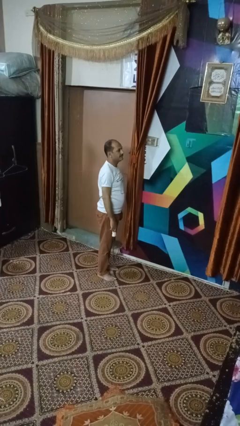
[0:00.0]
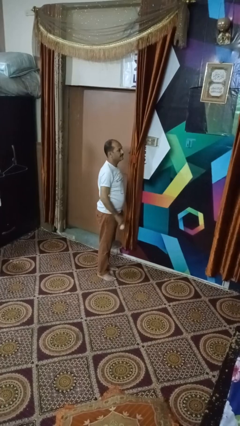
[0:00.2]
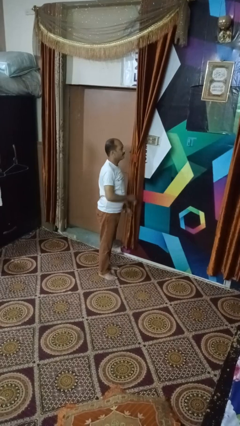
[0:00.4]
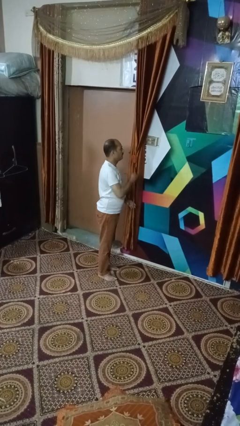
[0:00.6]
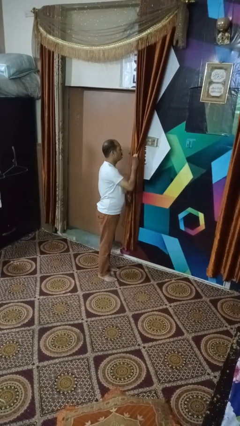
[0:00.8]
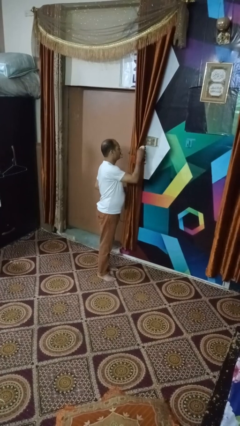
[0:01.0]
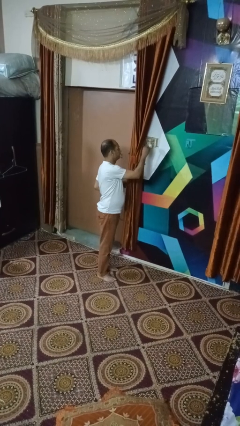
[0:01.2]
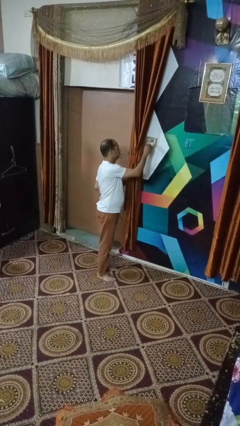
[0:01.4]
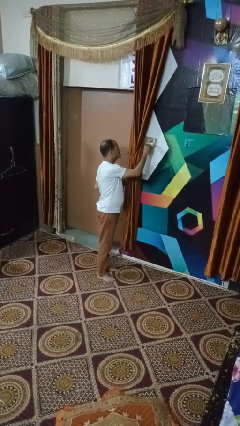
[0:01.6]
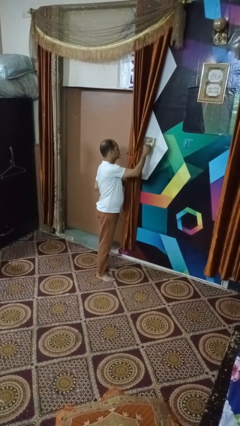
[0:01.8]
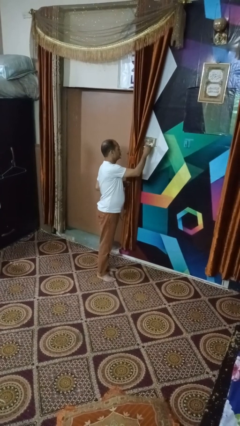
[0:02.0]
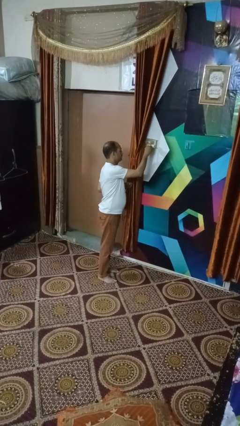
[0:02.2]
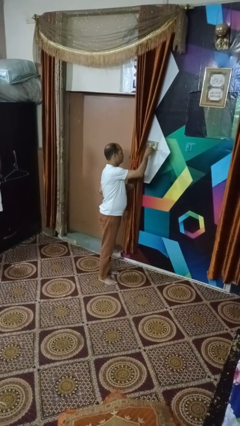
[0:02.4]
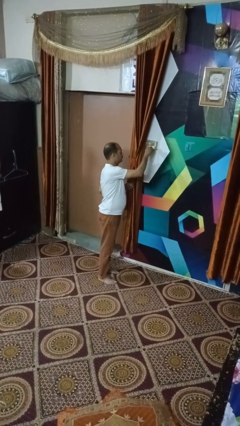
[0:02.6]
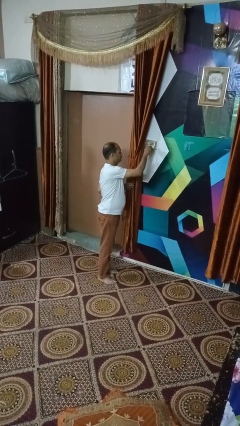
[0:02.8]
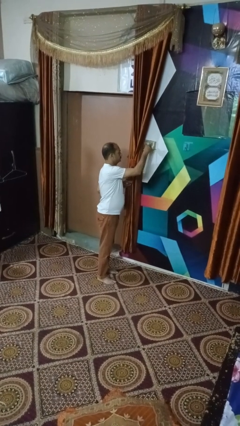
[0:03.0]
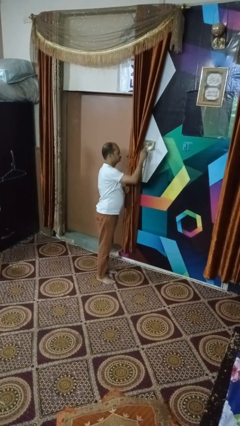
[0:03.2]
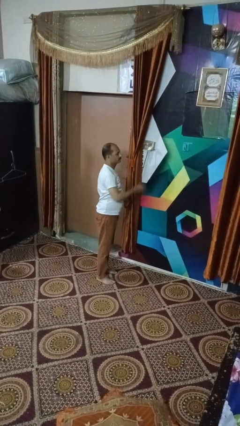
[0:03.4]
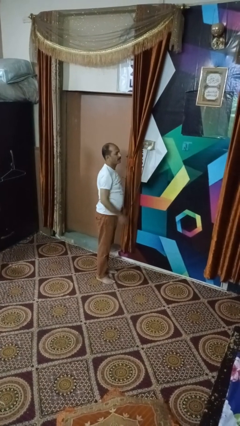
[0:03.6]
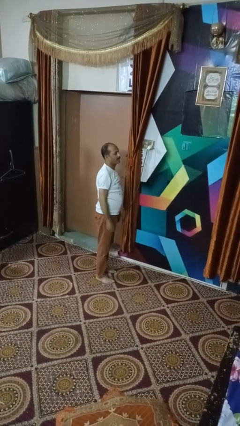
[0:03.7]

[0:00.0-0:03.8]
person plugs into electrical socket

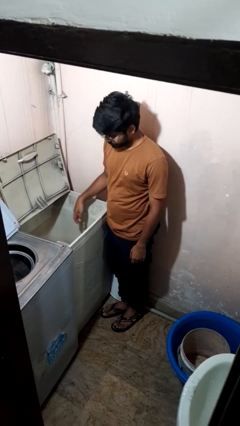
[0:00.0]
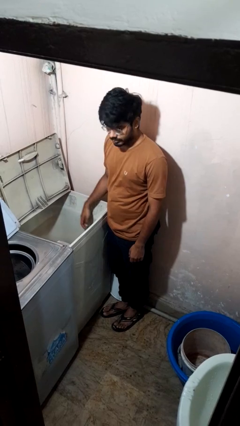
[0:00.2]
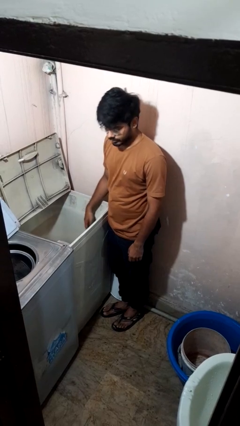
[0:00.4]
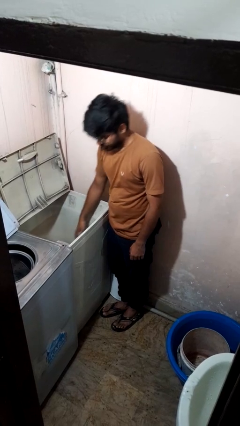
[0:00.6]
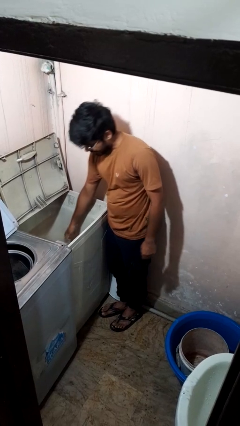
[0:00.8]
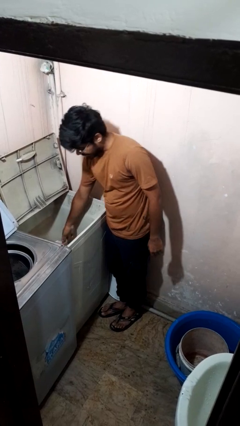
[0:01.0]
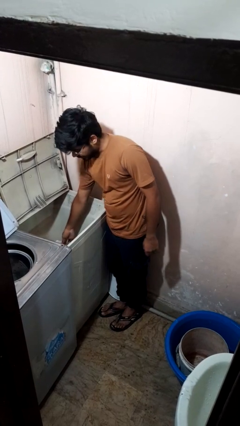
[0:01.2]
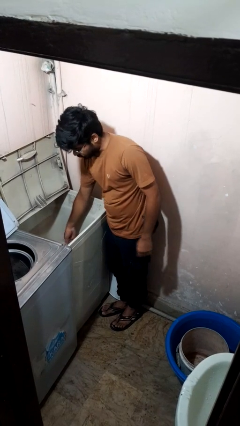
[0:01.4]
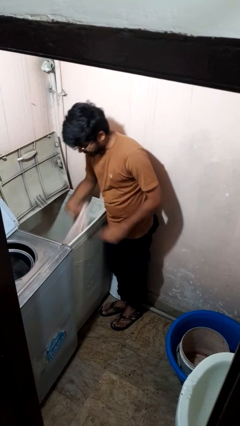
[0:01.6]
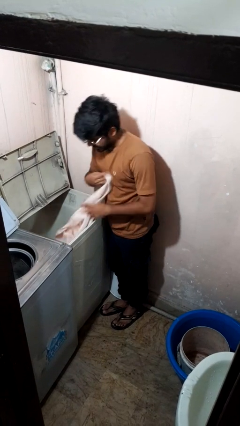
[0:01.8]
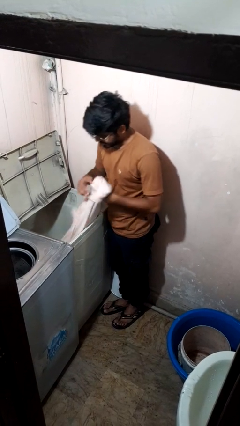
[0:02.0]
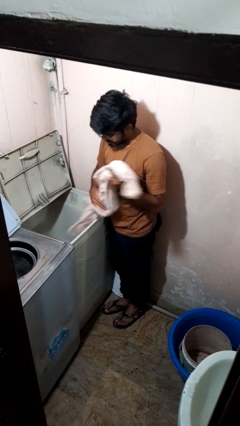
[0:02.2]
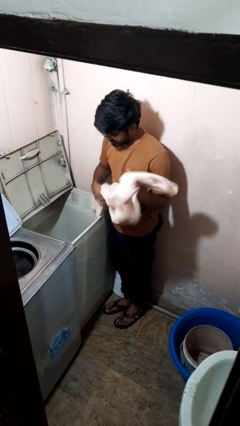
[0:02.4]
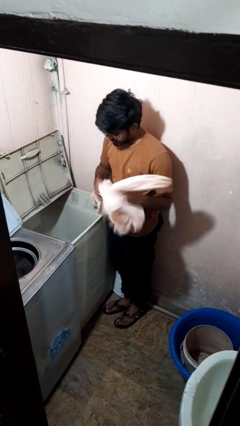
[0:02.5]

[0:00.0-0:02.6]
person unloads clotheswasher

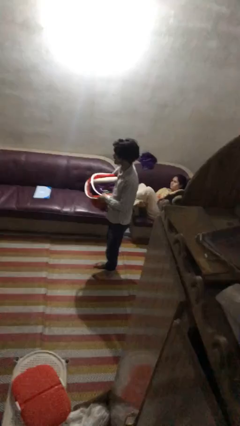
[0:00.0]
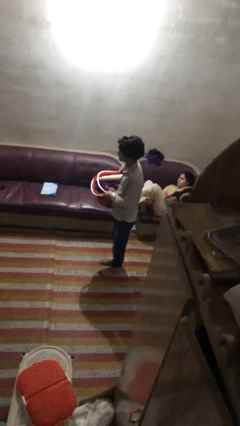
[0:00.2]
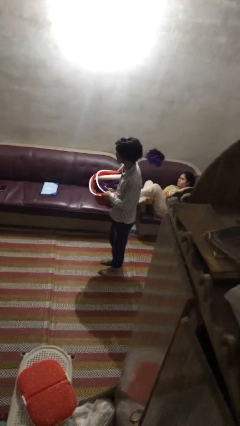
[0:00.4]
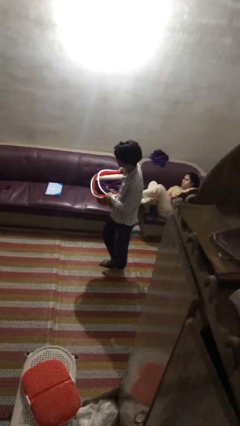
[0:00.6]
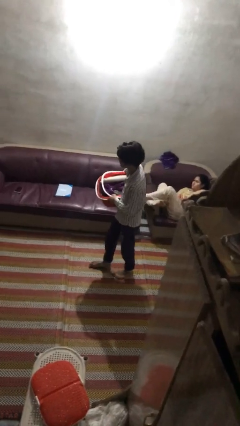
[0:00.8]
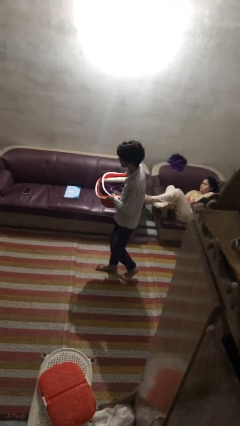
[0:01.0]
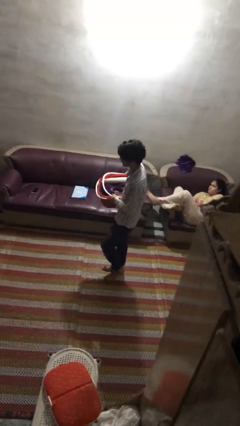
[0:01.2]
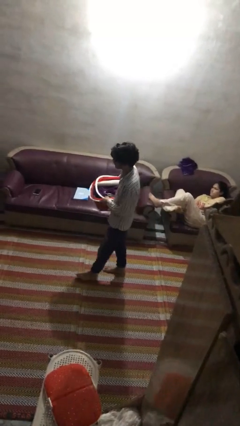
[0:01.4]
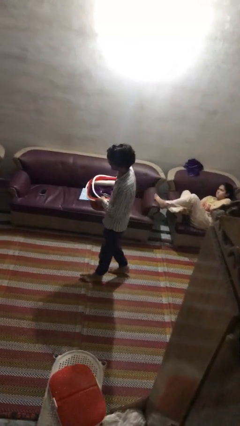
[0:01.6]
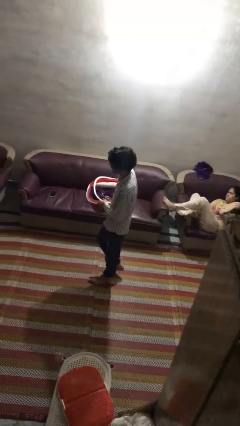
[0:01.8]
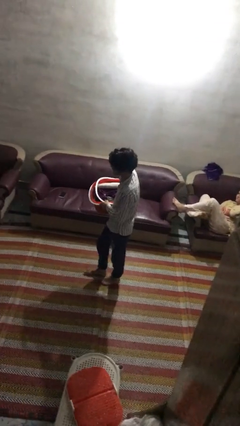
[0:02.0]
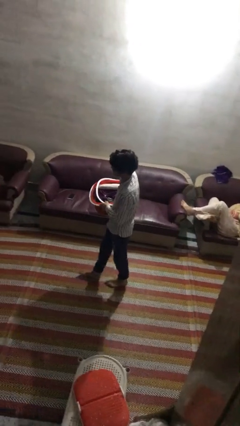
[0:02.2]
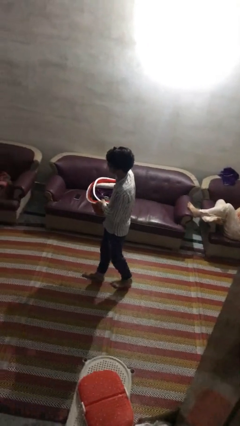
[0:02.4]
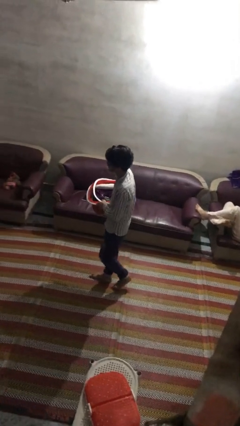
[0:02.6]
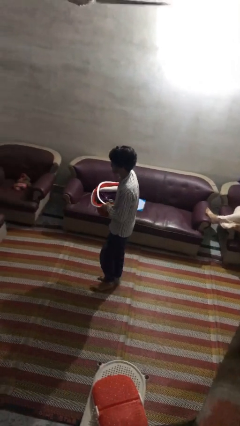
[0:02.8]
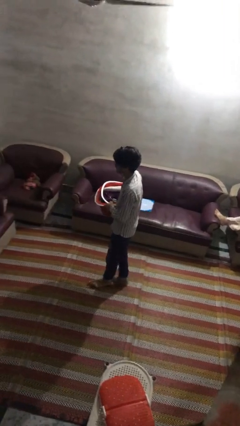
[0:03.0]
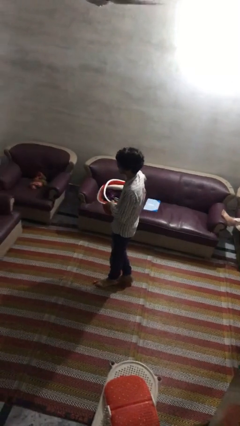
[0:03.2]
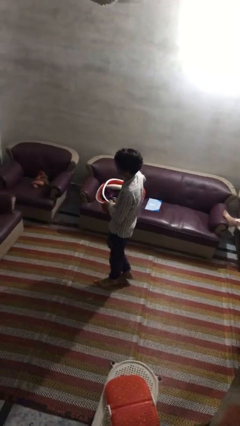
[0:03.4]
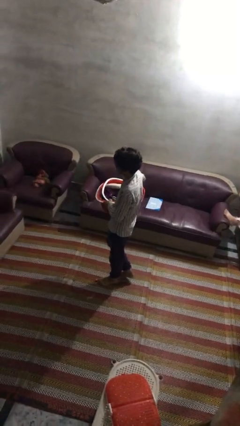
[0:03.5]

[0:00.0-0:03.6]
person carries laundry basket

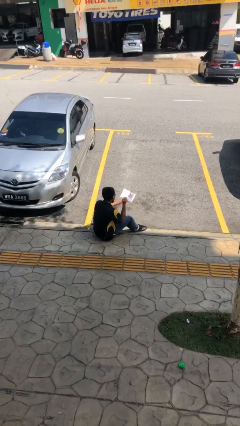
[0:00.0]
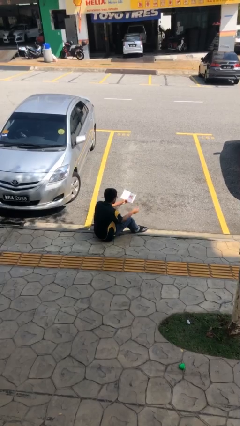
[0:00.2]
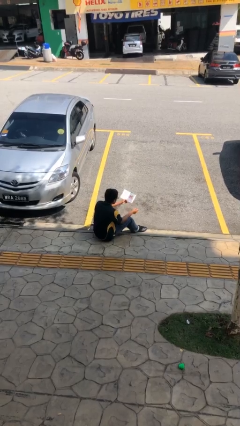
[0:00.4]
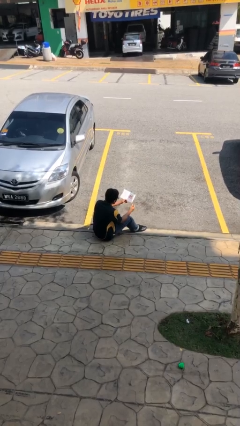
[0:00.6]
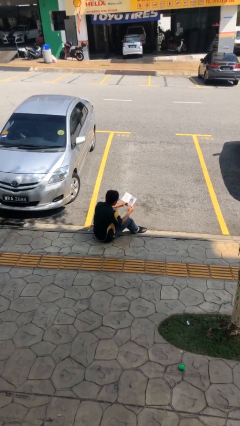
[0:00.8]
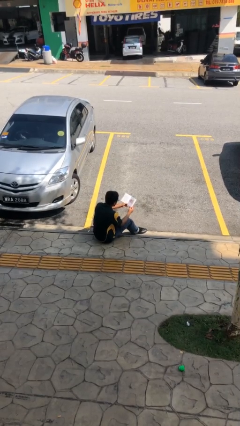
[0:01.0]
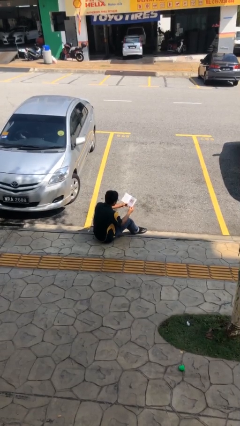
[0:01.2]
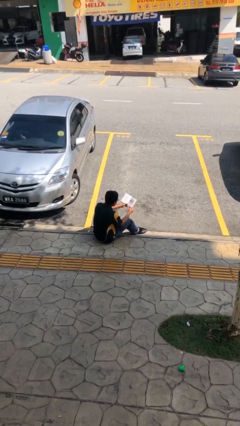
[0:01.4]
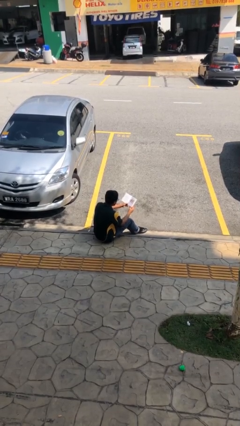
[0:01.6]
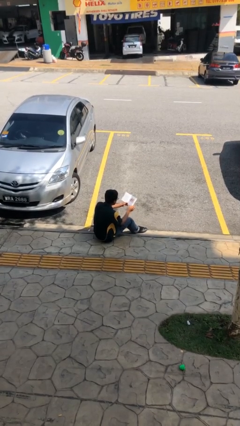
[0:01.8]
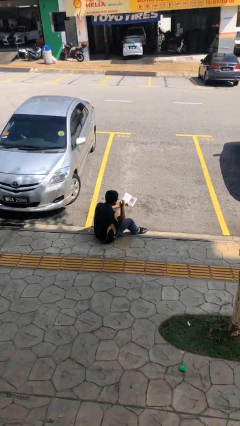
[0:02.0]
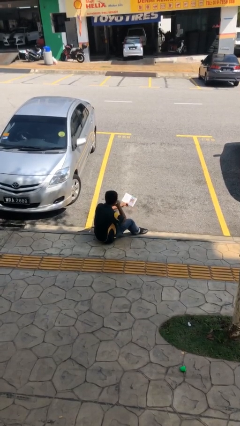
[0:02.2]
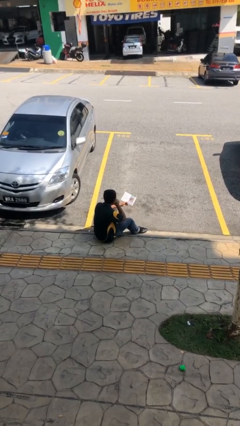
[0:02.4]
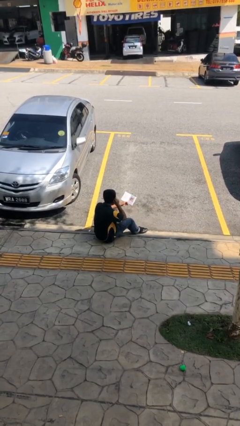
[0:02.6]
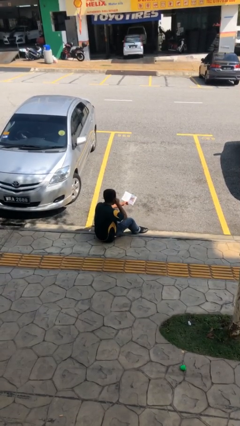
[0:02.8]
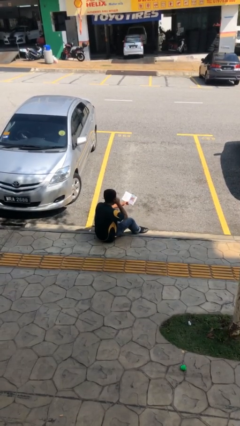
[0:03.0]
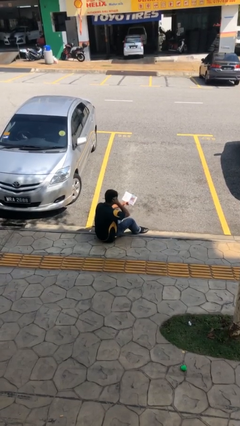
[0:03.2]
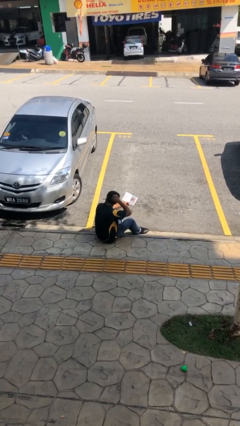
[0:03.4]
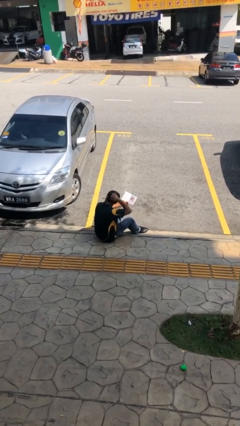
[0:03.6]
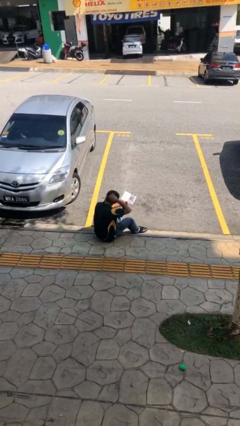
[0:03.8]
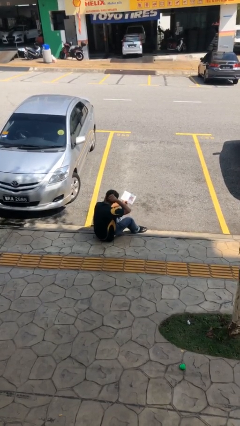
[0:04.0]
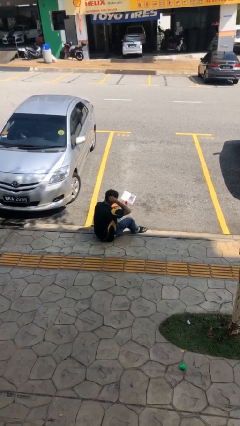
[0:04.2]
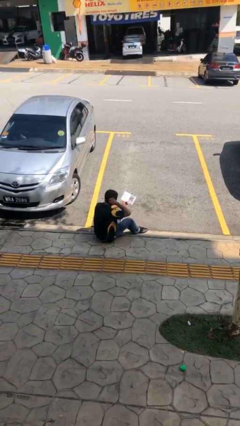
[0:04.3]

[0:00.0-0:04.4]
person reads document

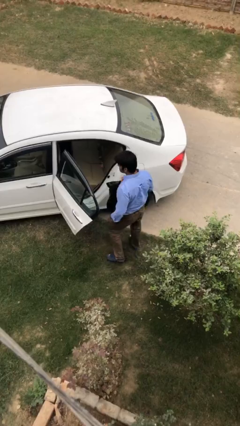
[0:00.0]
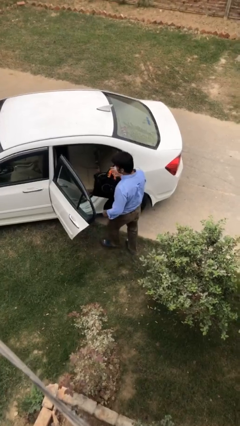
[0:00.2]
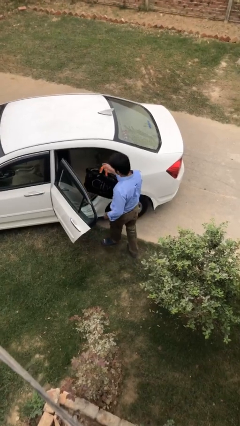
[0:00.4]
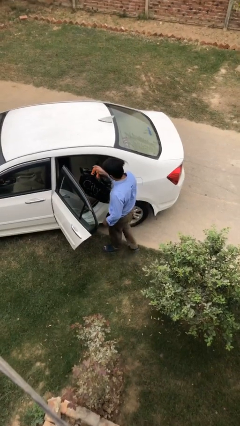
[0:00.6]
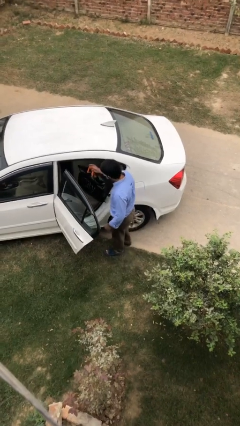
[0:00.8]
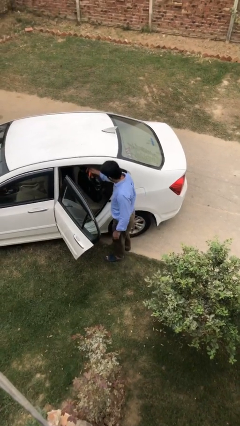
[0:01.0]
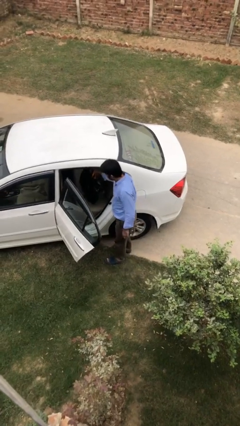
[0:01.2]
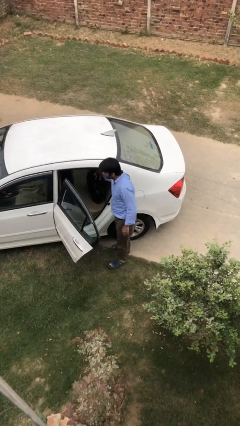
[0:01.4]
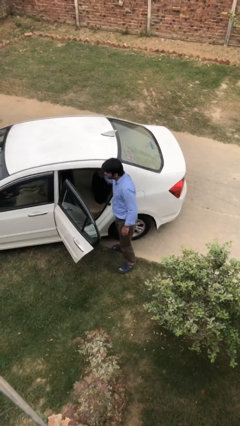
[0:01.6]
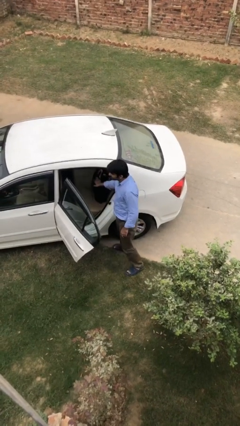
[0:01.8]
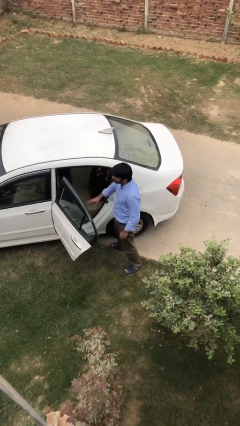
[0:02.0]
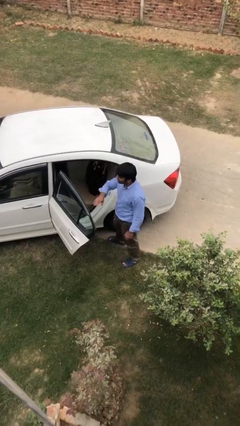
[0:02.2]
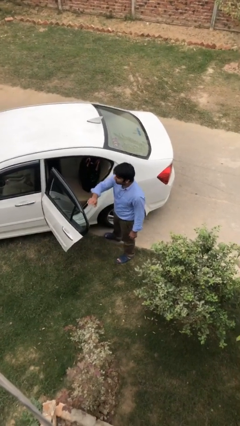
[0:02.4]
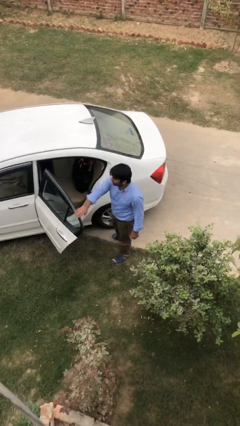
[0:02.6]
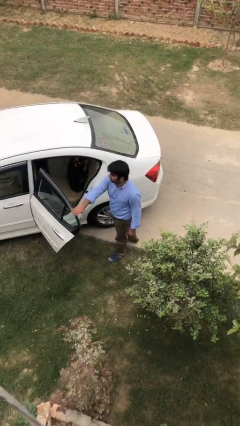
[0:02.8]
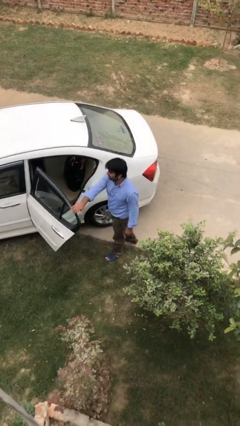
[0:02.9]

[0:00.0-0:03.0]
person loads car

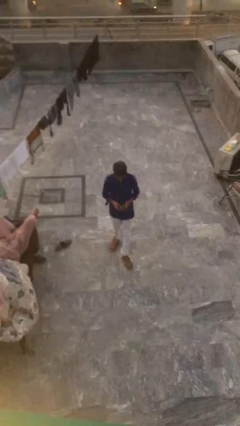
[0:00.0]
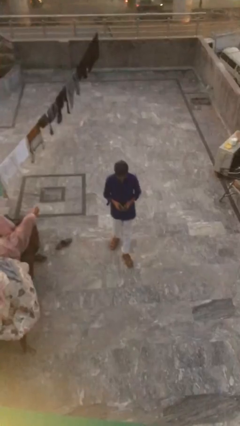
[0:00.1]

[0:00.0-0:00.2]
person talks on phone
